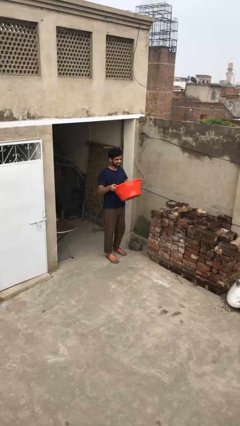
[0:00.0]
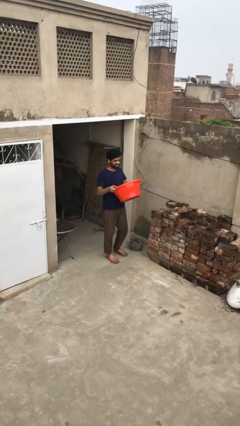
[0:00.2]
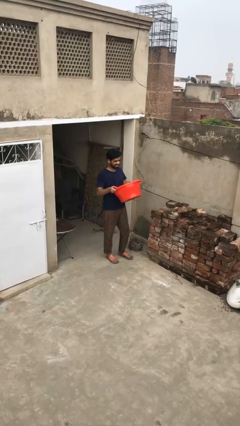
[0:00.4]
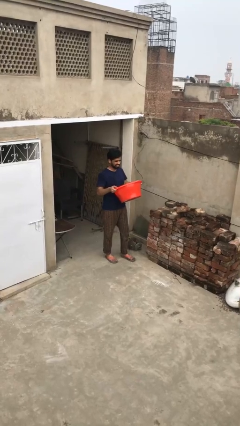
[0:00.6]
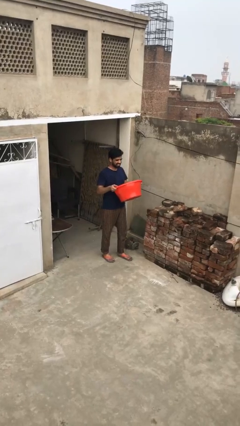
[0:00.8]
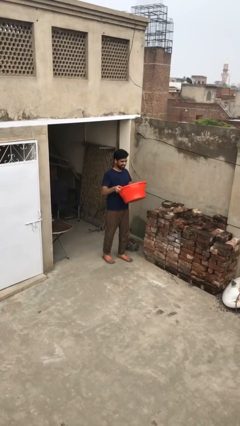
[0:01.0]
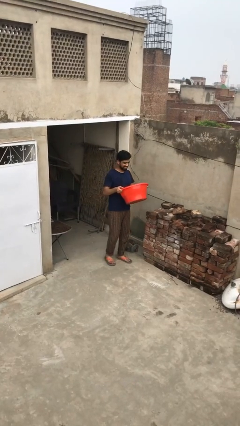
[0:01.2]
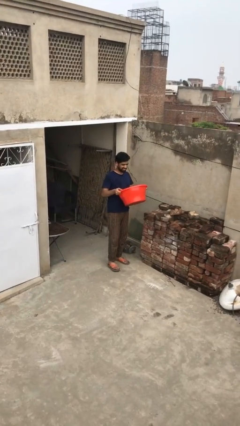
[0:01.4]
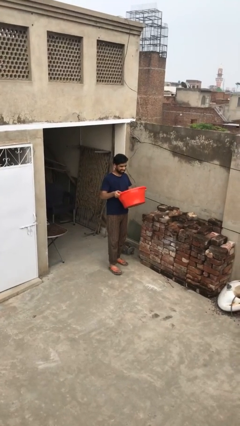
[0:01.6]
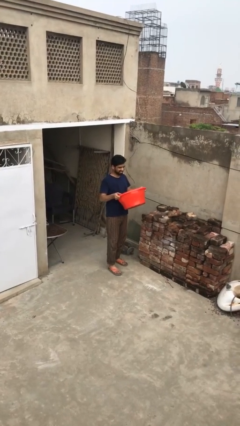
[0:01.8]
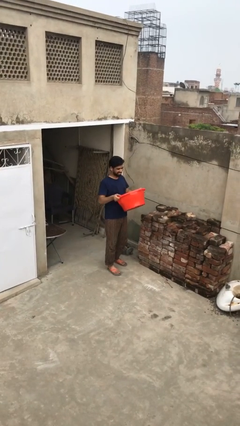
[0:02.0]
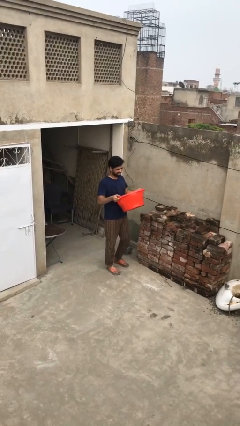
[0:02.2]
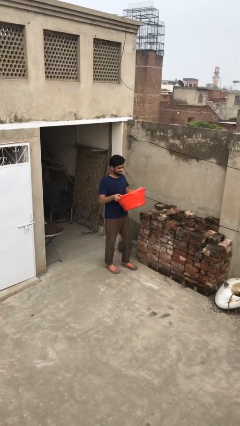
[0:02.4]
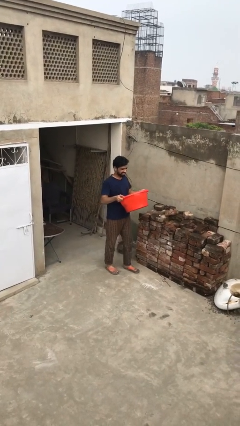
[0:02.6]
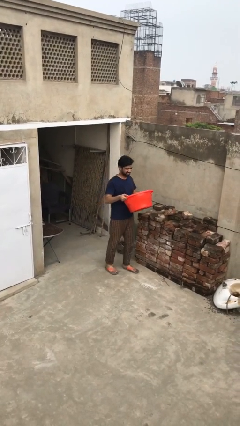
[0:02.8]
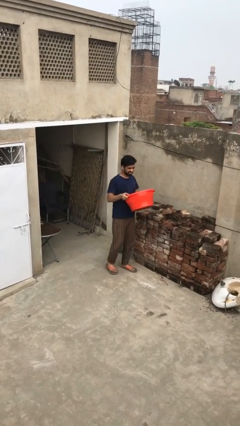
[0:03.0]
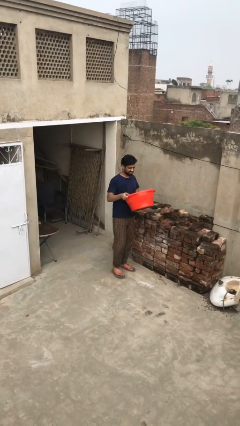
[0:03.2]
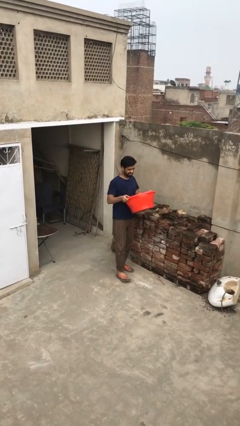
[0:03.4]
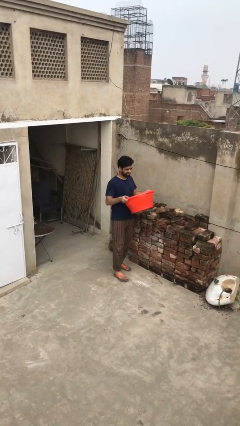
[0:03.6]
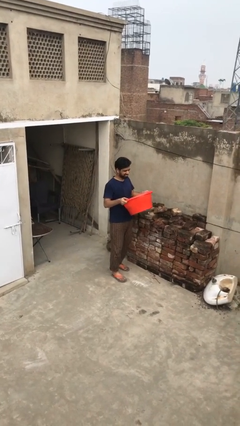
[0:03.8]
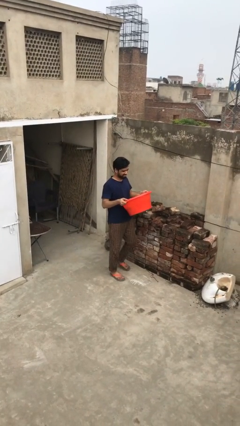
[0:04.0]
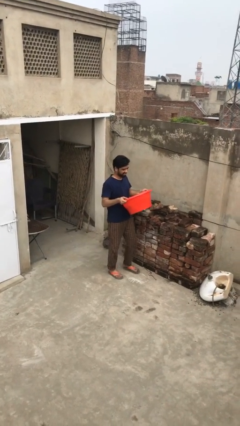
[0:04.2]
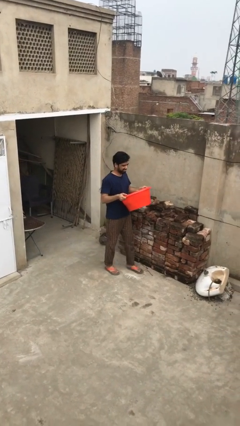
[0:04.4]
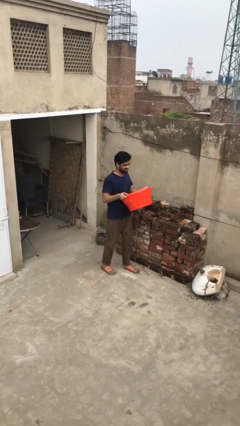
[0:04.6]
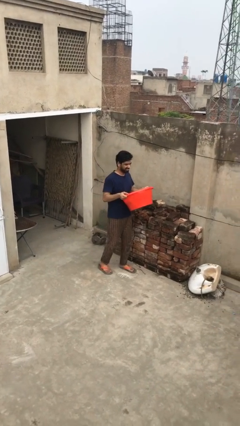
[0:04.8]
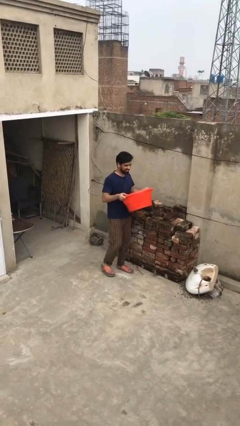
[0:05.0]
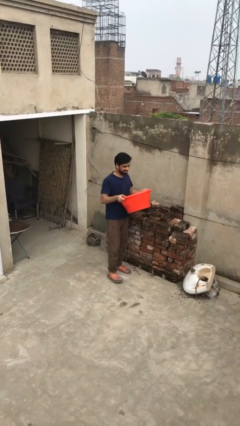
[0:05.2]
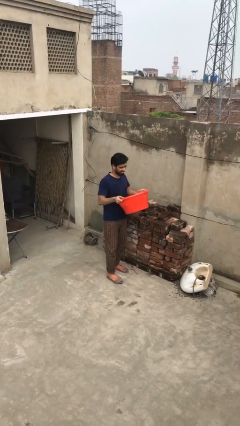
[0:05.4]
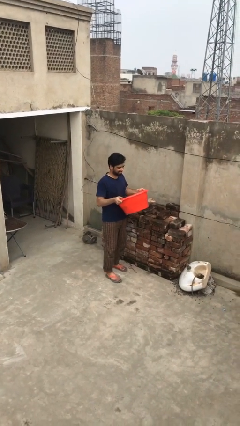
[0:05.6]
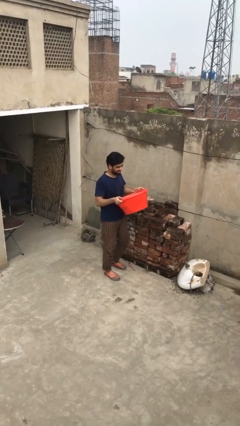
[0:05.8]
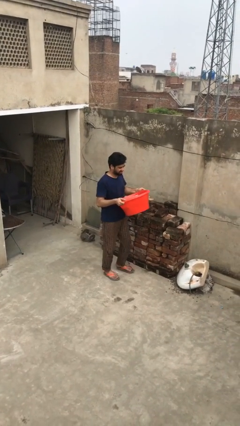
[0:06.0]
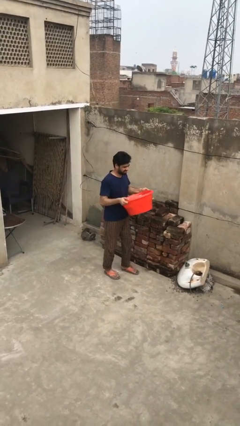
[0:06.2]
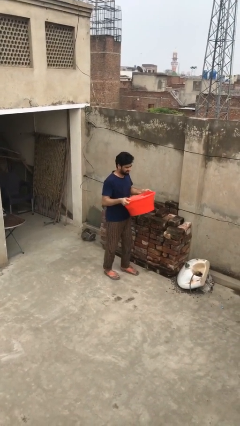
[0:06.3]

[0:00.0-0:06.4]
person carries heavy object

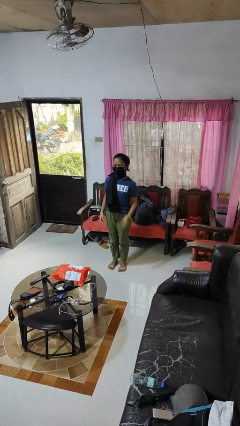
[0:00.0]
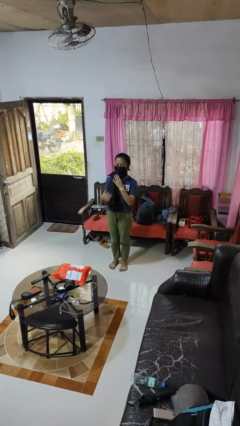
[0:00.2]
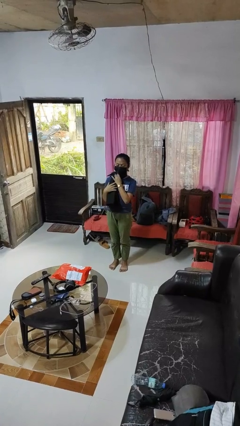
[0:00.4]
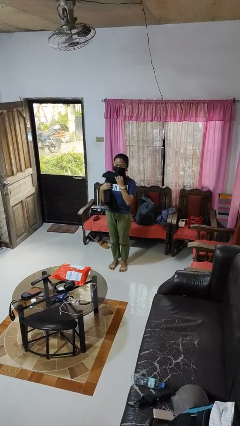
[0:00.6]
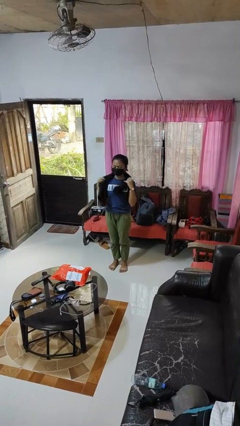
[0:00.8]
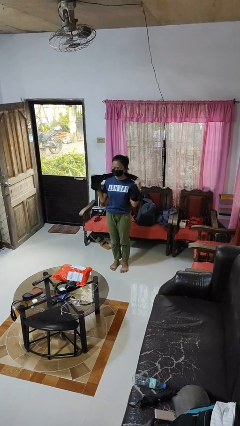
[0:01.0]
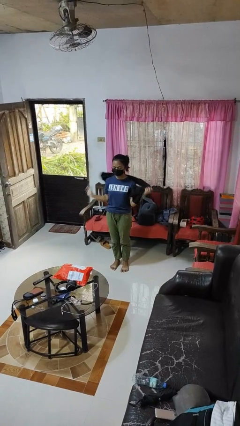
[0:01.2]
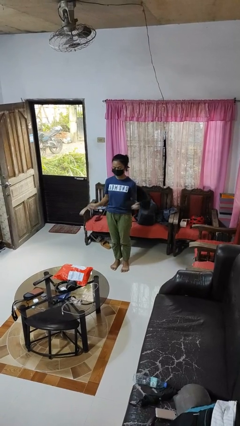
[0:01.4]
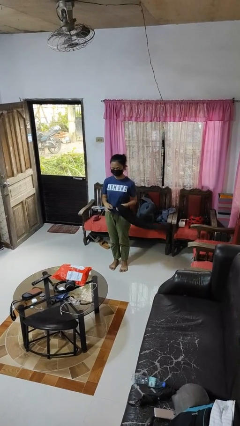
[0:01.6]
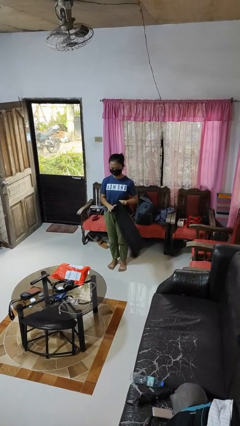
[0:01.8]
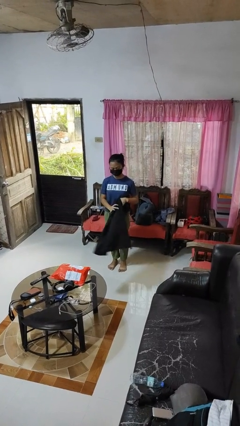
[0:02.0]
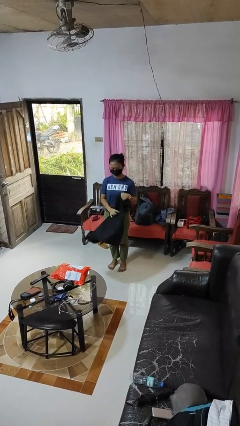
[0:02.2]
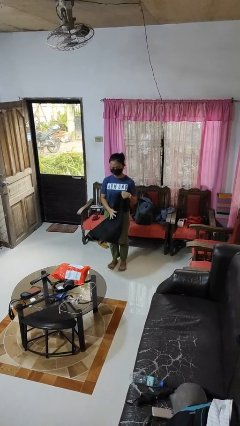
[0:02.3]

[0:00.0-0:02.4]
person takes off scarf

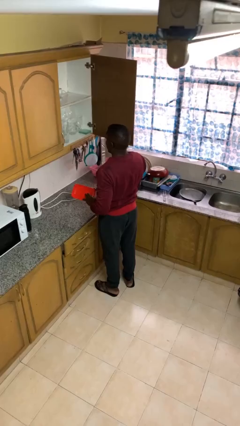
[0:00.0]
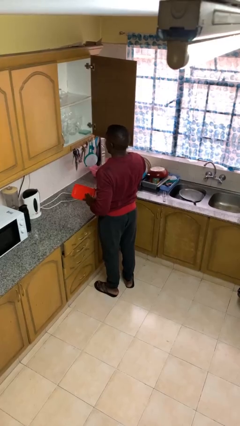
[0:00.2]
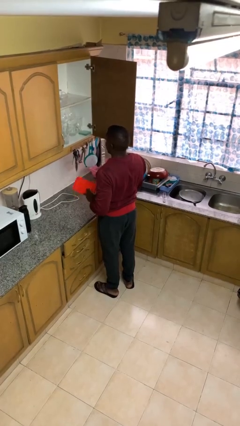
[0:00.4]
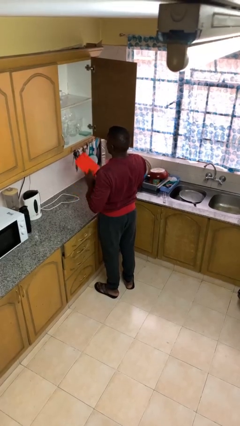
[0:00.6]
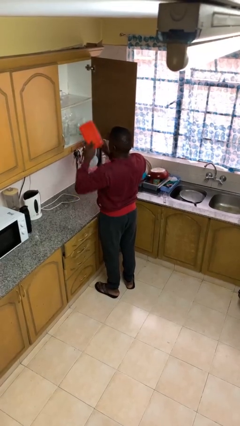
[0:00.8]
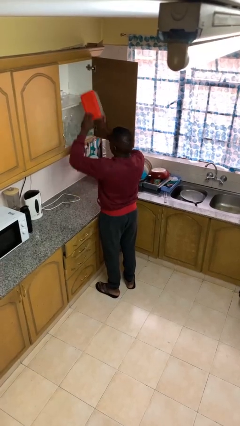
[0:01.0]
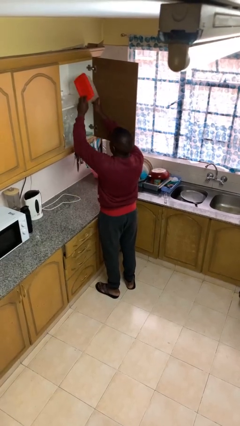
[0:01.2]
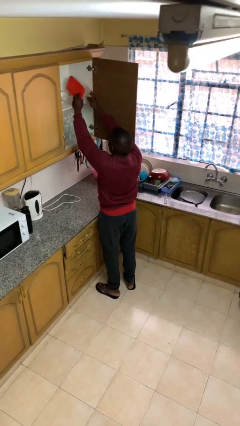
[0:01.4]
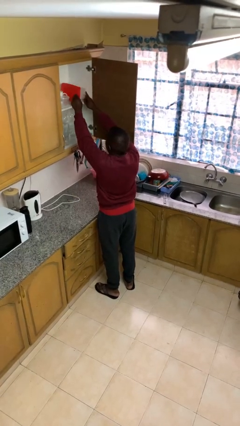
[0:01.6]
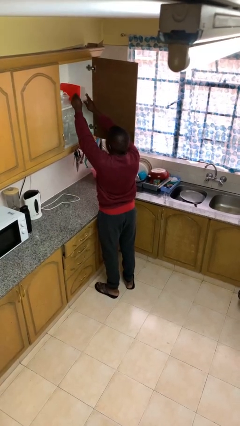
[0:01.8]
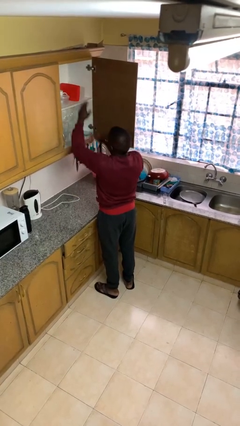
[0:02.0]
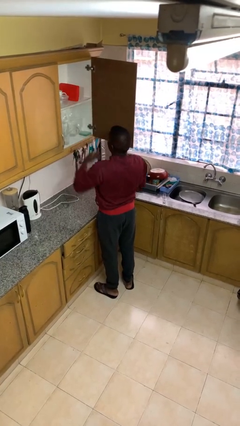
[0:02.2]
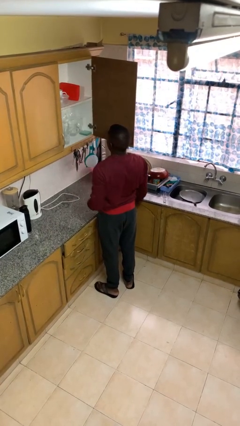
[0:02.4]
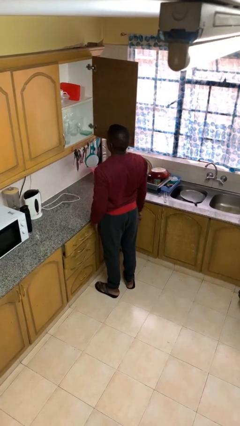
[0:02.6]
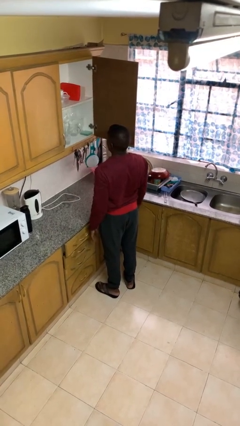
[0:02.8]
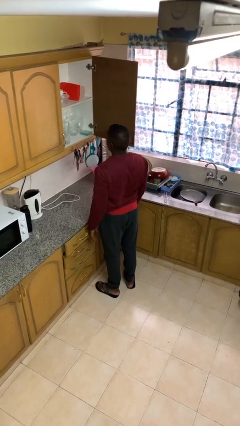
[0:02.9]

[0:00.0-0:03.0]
person puts down object into cabinet

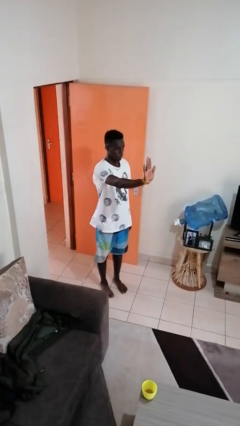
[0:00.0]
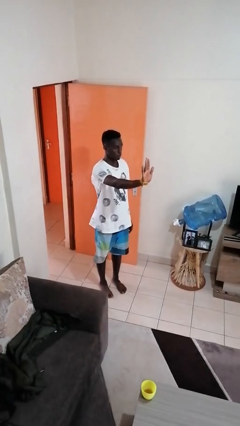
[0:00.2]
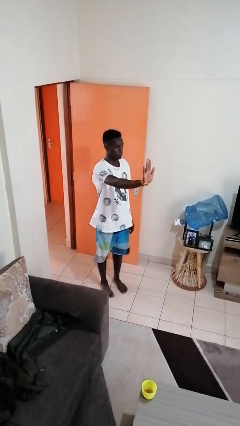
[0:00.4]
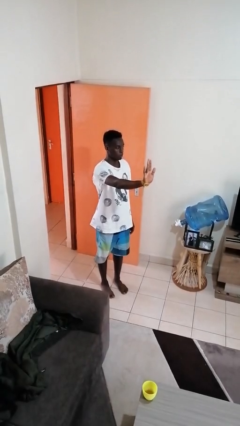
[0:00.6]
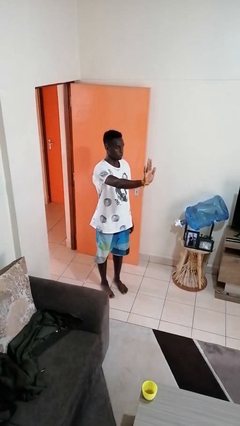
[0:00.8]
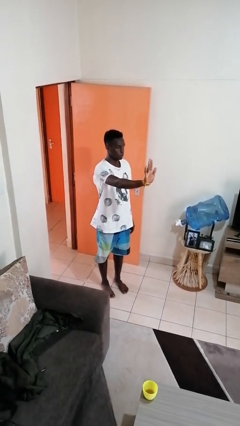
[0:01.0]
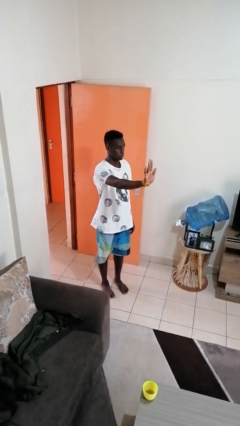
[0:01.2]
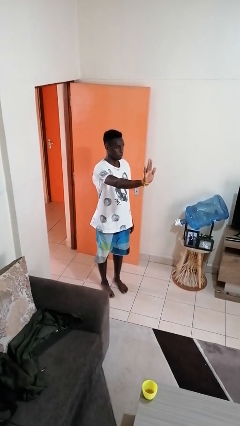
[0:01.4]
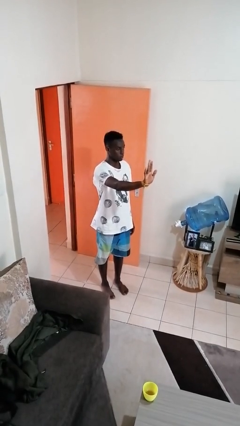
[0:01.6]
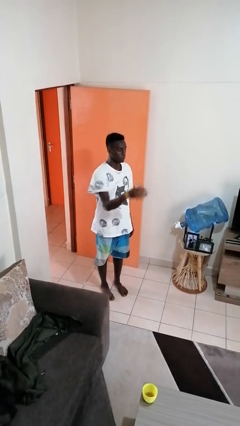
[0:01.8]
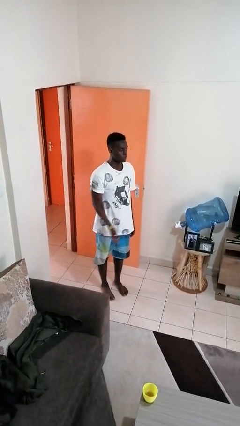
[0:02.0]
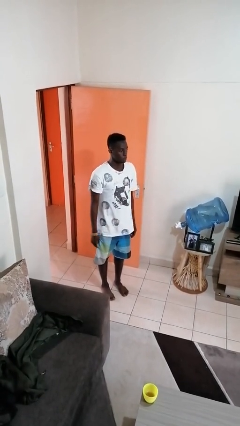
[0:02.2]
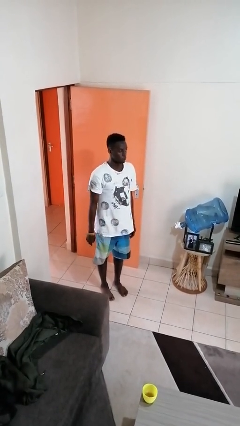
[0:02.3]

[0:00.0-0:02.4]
person gestures stop

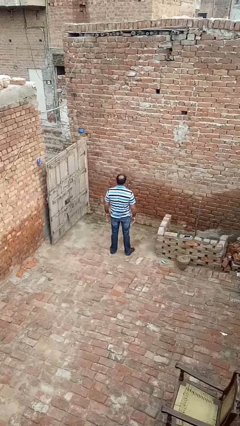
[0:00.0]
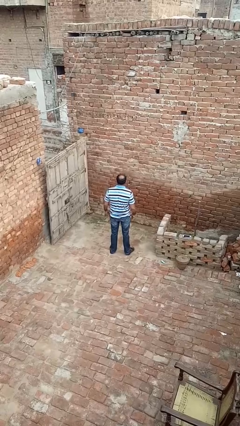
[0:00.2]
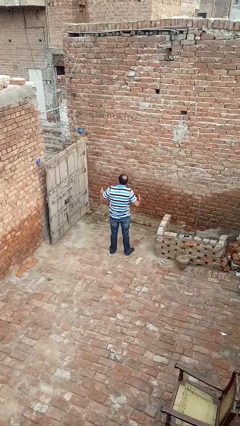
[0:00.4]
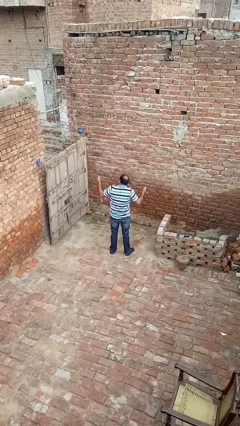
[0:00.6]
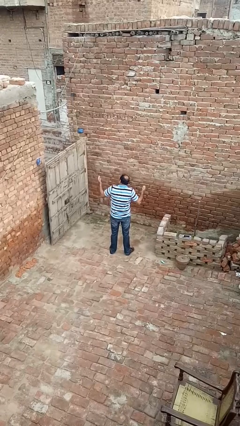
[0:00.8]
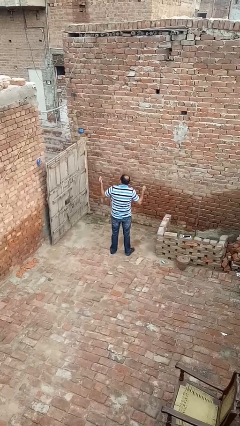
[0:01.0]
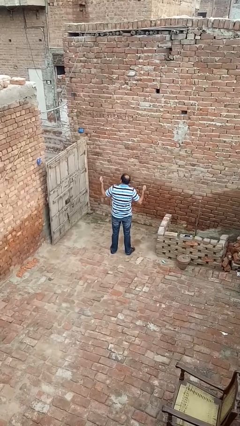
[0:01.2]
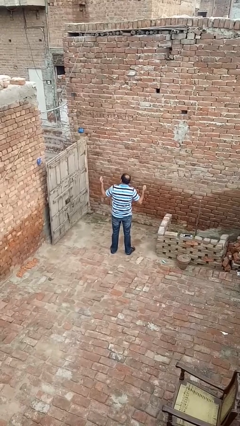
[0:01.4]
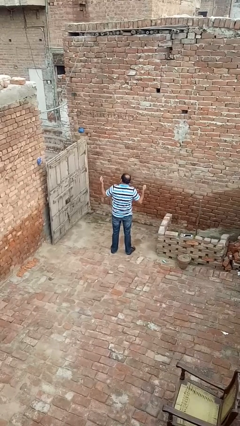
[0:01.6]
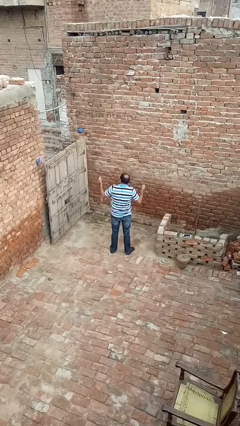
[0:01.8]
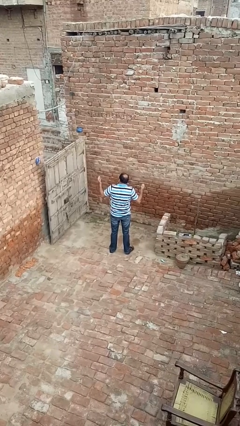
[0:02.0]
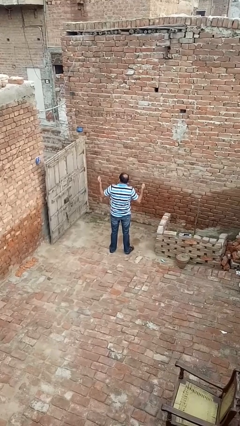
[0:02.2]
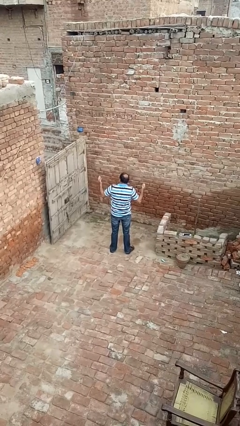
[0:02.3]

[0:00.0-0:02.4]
person shrugs

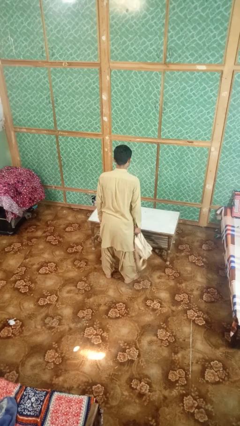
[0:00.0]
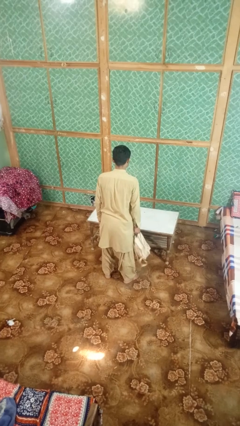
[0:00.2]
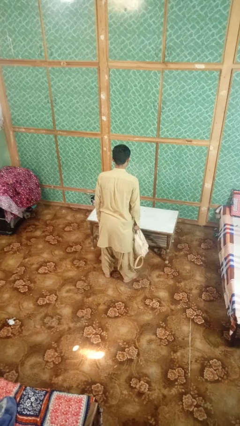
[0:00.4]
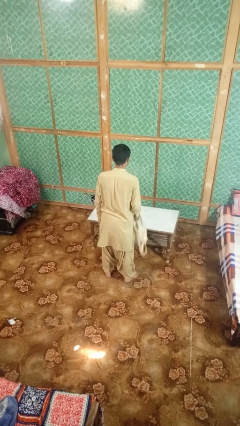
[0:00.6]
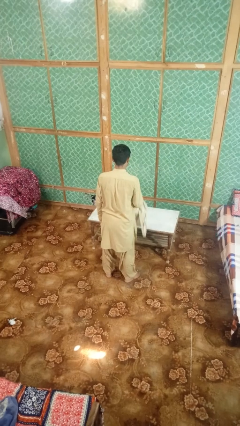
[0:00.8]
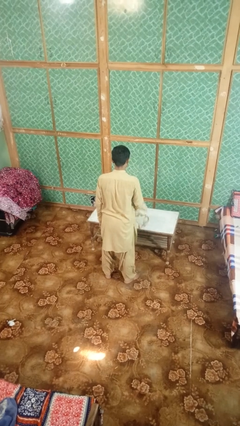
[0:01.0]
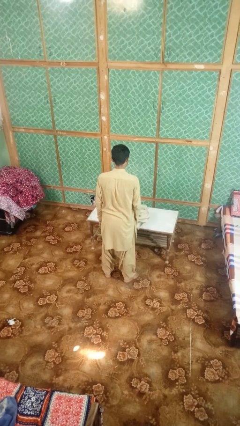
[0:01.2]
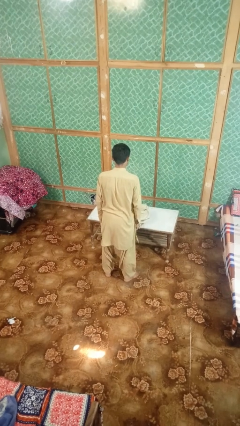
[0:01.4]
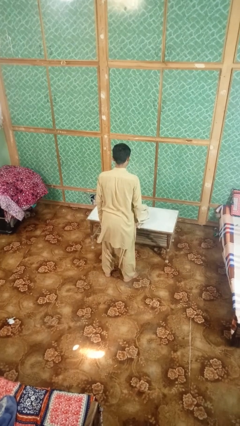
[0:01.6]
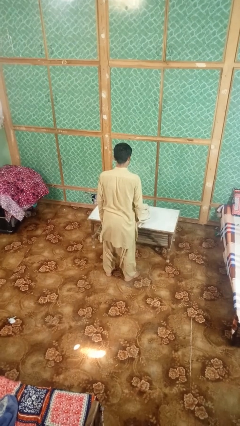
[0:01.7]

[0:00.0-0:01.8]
person throws object on table
